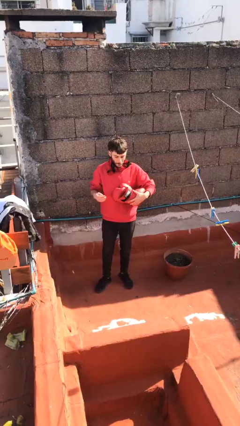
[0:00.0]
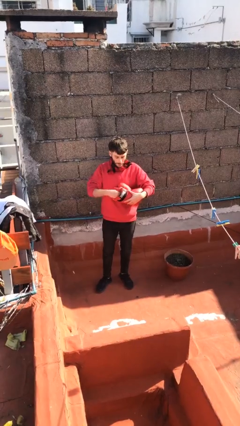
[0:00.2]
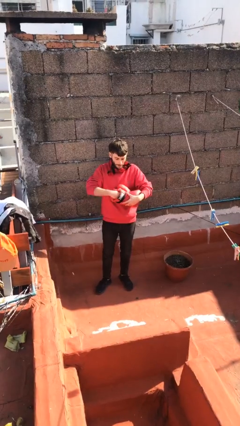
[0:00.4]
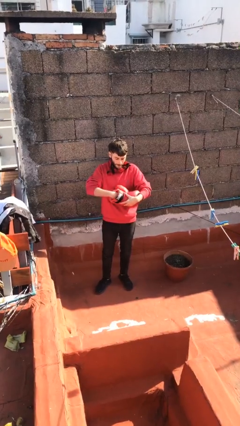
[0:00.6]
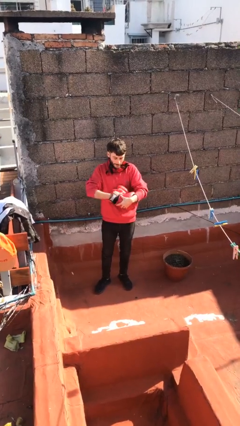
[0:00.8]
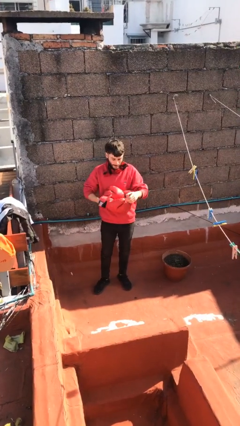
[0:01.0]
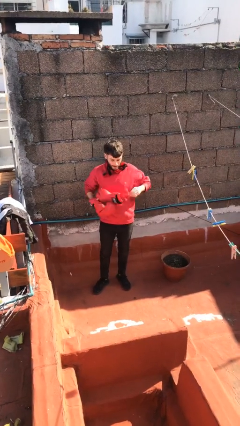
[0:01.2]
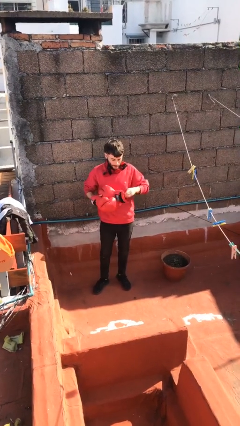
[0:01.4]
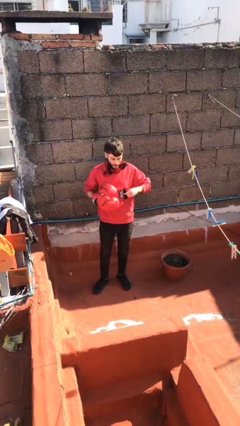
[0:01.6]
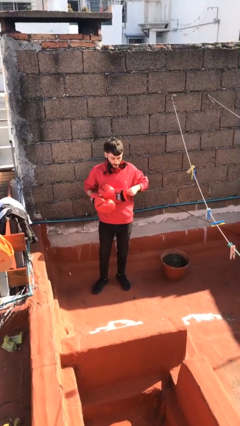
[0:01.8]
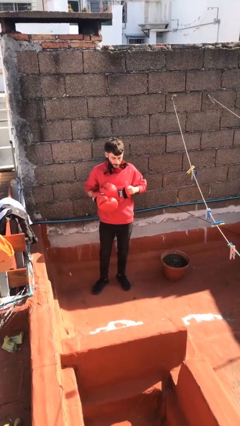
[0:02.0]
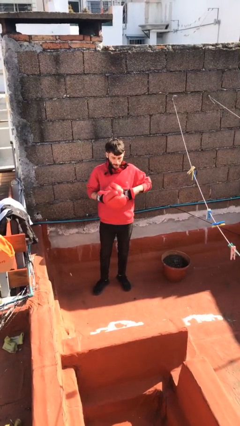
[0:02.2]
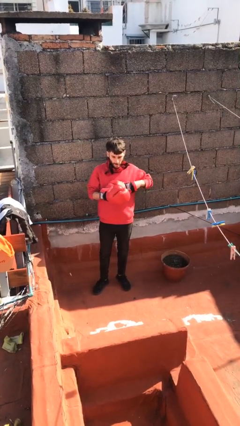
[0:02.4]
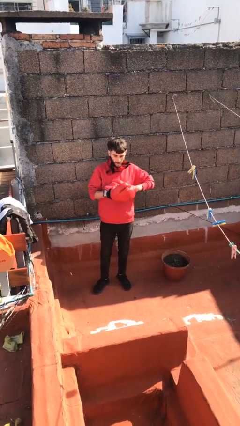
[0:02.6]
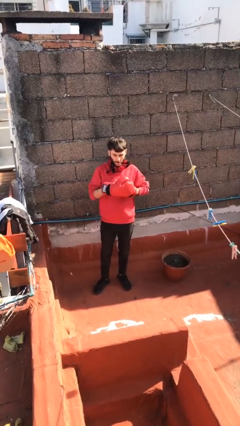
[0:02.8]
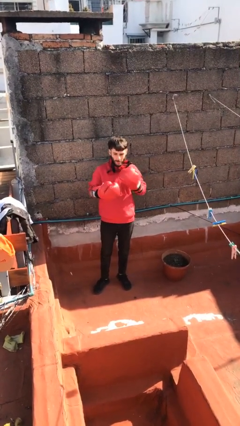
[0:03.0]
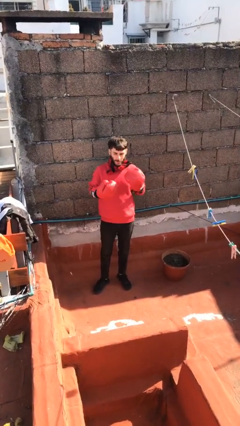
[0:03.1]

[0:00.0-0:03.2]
person puts on gloves

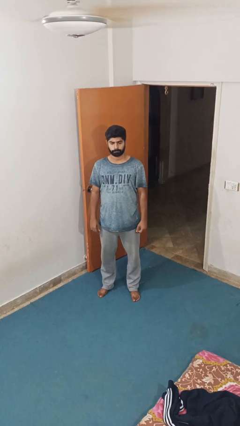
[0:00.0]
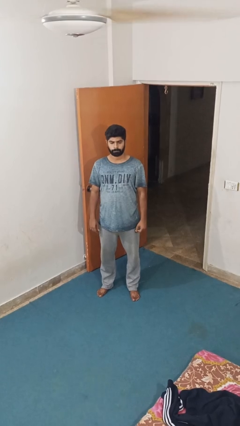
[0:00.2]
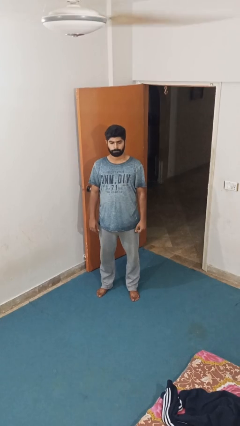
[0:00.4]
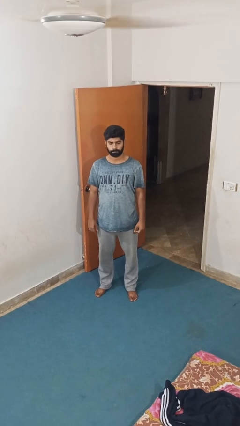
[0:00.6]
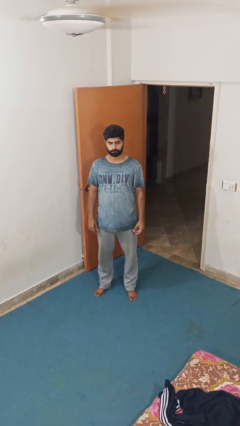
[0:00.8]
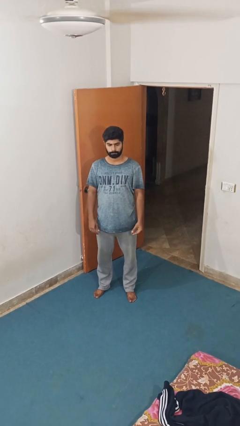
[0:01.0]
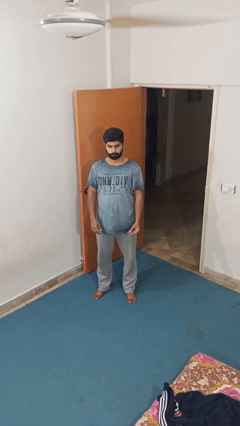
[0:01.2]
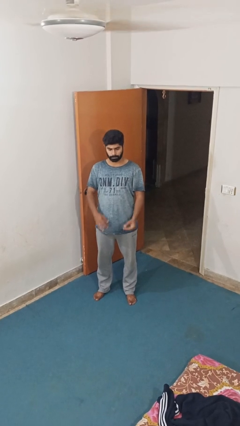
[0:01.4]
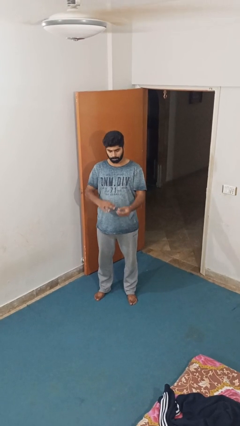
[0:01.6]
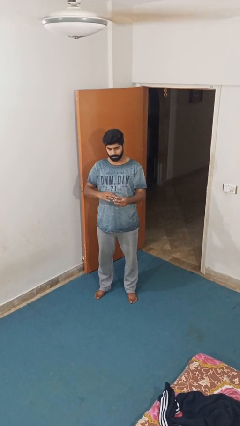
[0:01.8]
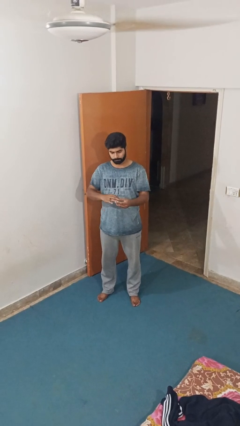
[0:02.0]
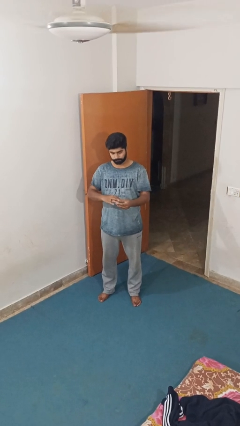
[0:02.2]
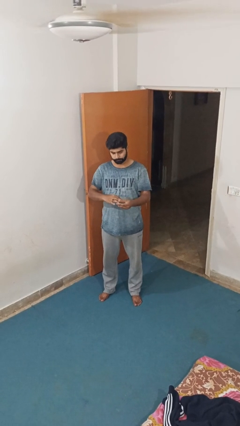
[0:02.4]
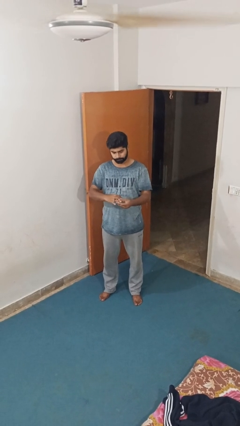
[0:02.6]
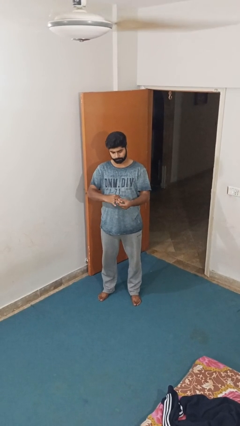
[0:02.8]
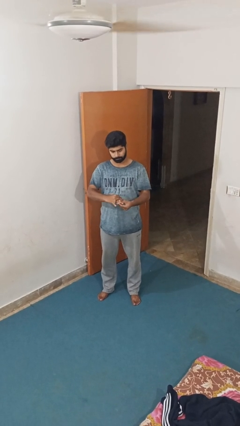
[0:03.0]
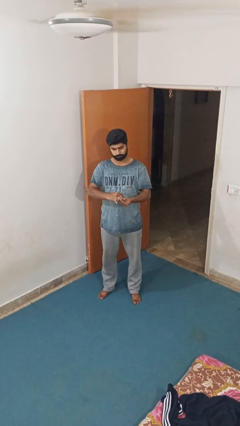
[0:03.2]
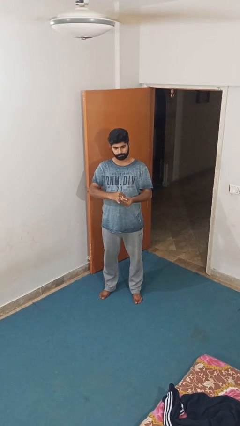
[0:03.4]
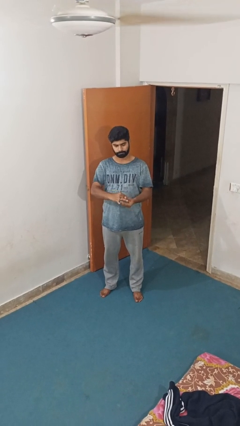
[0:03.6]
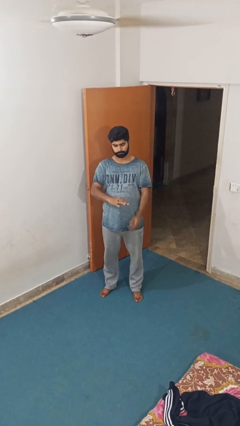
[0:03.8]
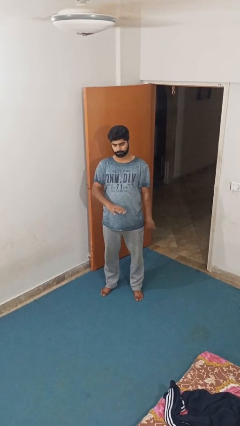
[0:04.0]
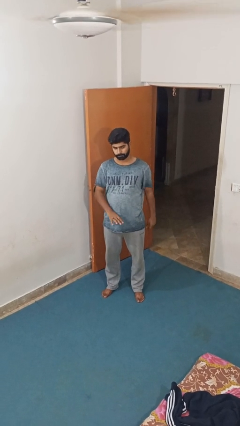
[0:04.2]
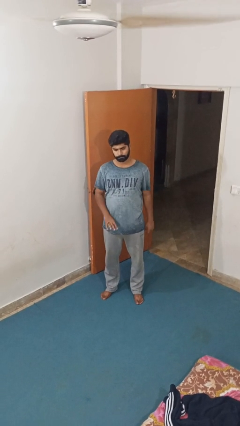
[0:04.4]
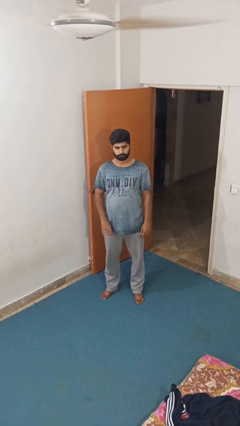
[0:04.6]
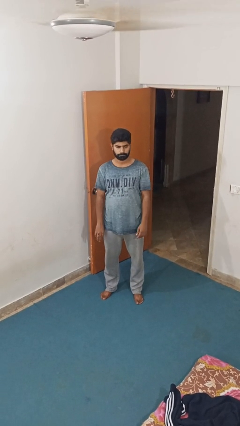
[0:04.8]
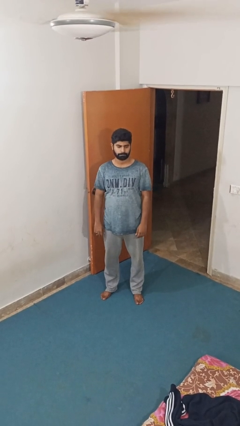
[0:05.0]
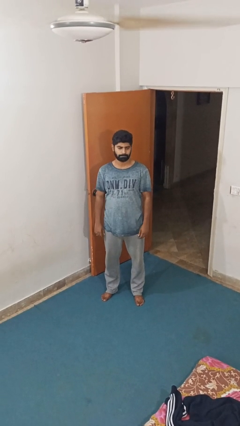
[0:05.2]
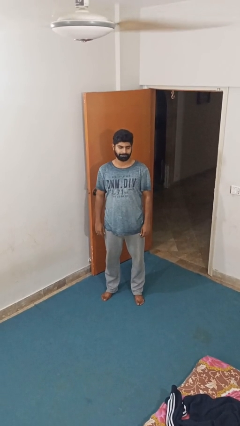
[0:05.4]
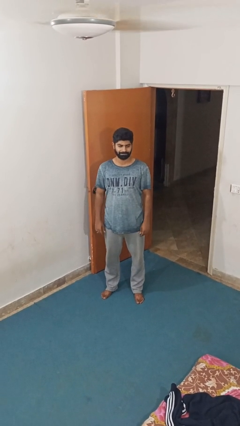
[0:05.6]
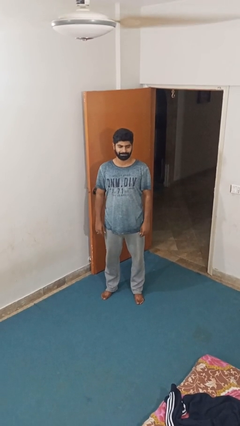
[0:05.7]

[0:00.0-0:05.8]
person puts on ring

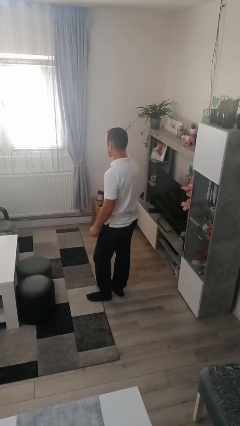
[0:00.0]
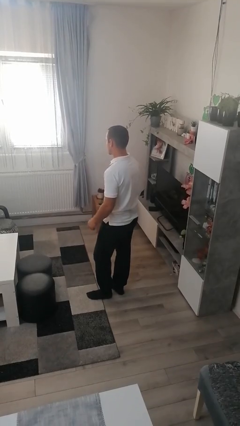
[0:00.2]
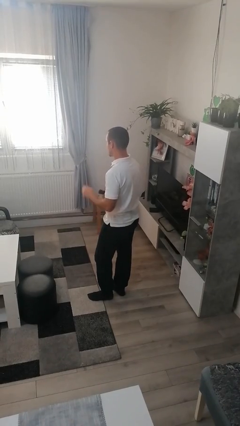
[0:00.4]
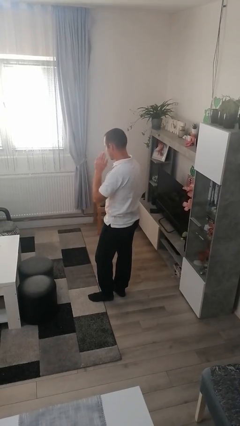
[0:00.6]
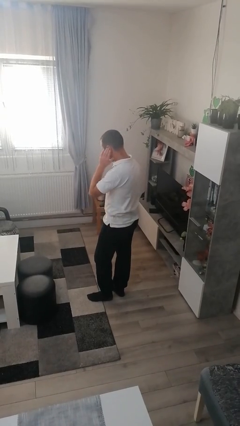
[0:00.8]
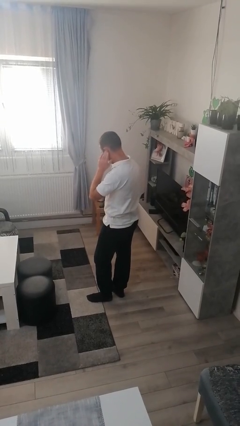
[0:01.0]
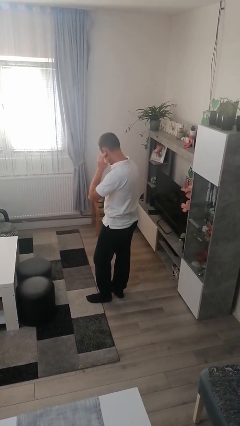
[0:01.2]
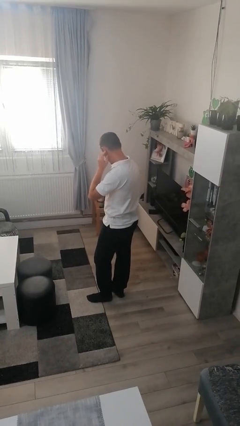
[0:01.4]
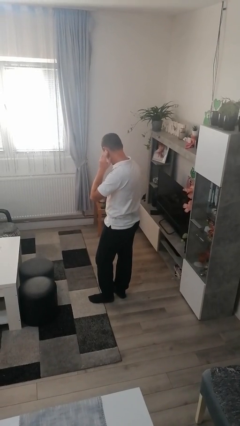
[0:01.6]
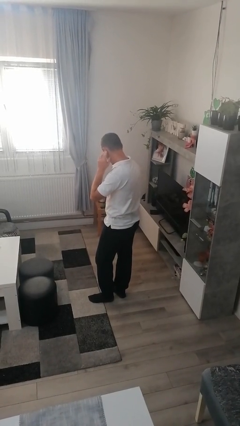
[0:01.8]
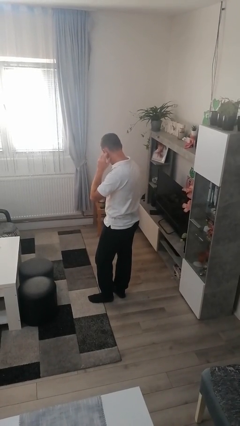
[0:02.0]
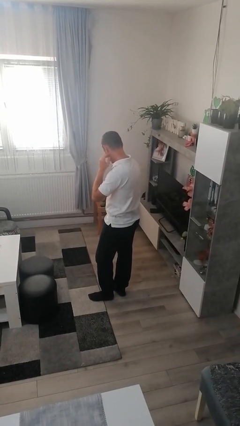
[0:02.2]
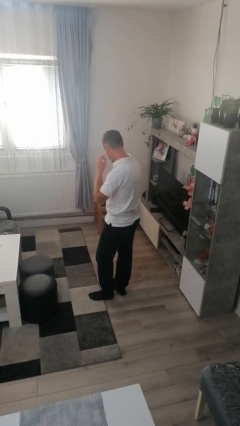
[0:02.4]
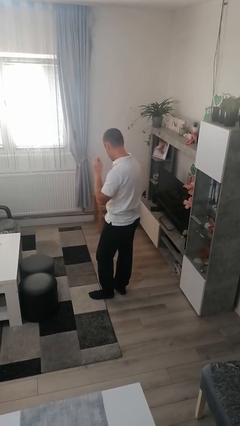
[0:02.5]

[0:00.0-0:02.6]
person touches earlobe

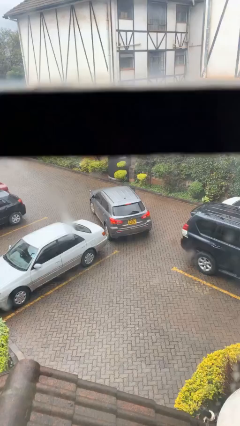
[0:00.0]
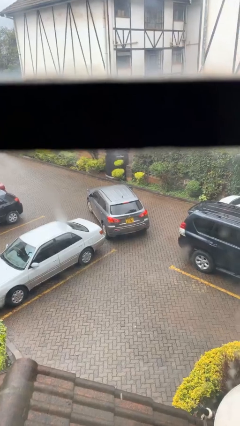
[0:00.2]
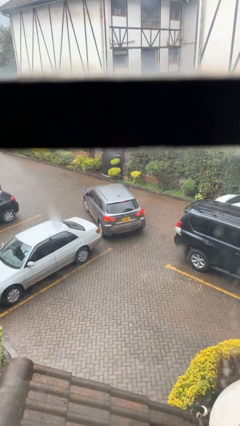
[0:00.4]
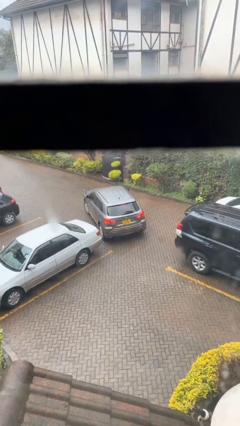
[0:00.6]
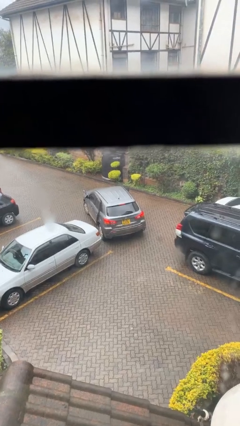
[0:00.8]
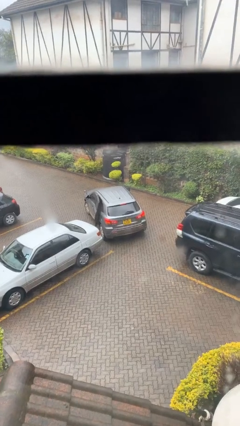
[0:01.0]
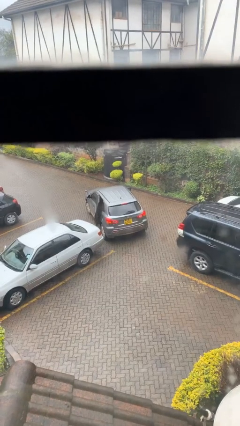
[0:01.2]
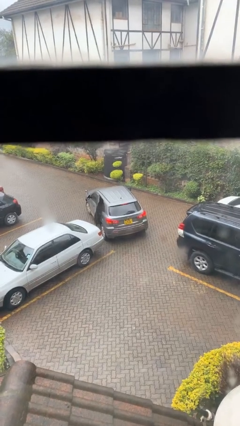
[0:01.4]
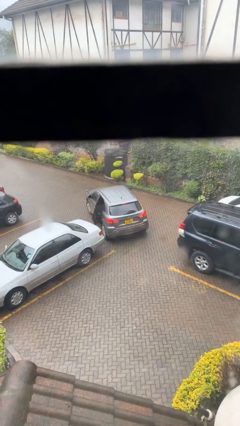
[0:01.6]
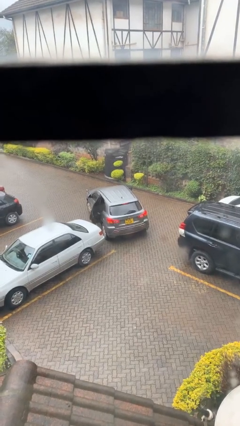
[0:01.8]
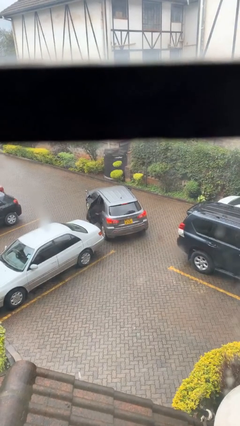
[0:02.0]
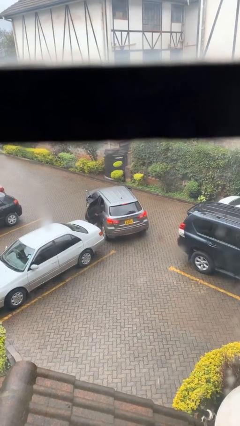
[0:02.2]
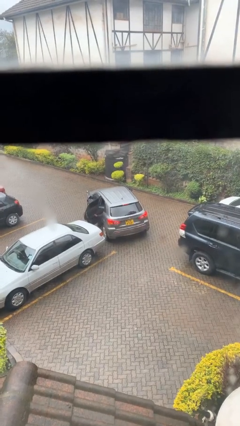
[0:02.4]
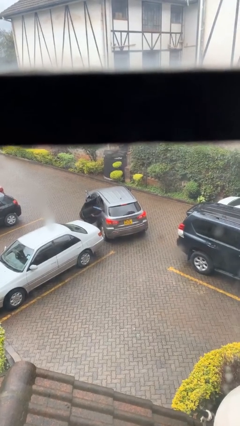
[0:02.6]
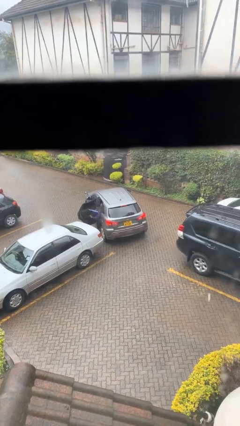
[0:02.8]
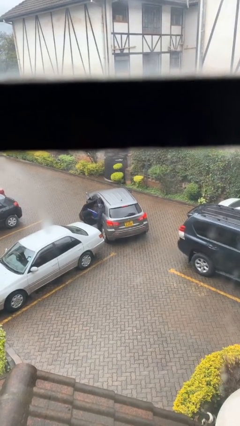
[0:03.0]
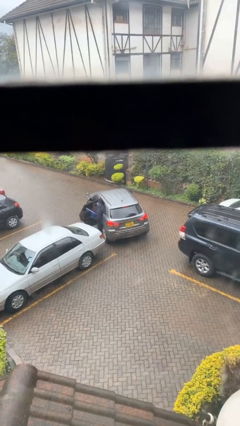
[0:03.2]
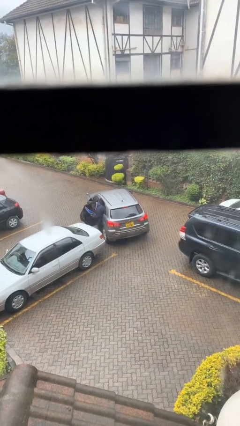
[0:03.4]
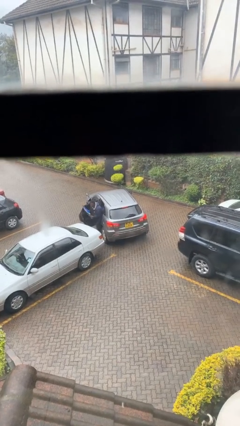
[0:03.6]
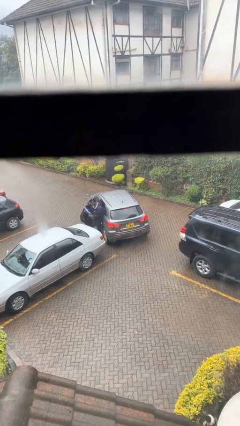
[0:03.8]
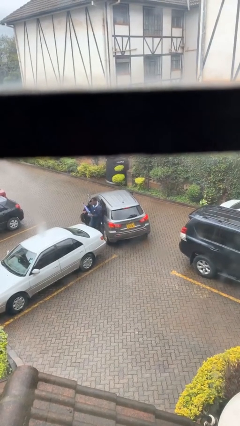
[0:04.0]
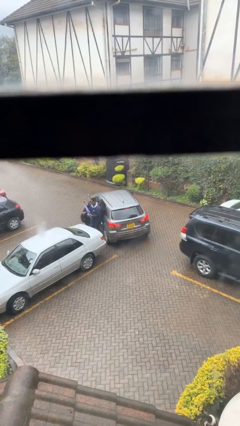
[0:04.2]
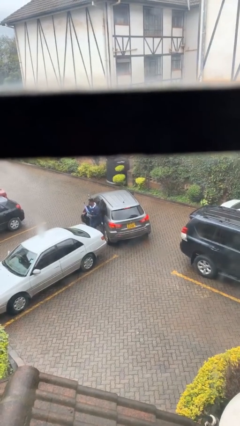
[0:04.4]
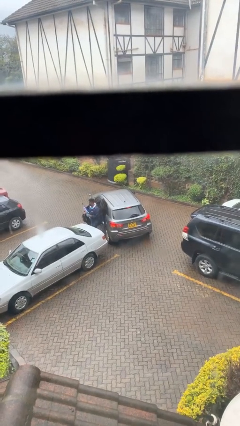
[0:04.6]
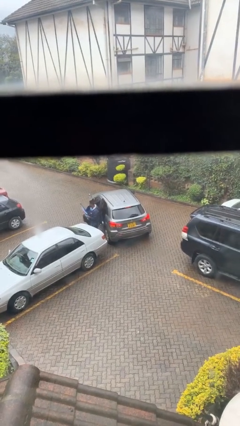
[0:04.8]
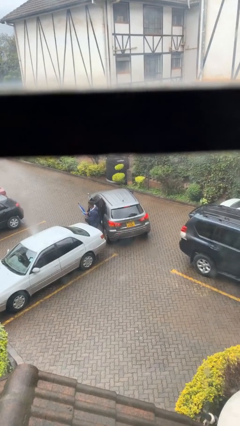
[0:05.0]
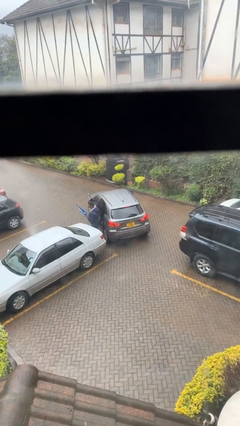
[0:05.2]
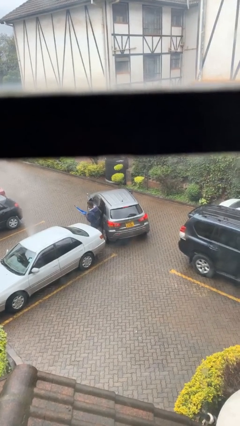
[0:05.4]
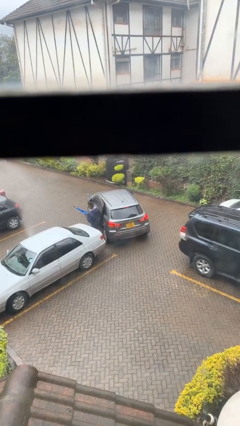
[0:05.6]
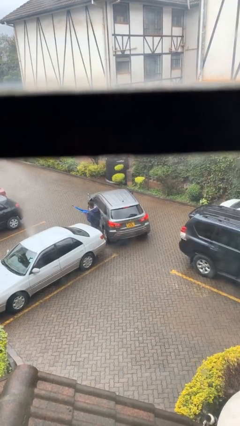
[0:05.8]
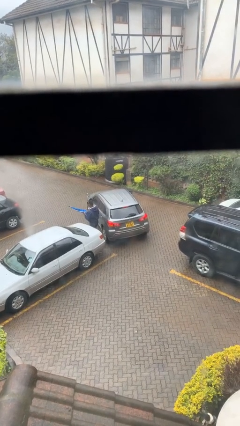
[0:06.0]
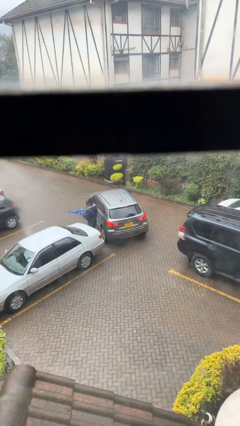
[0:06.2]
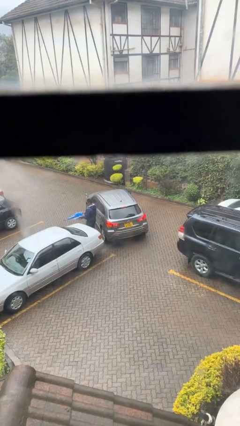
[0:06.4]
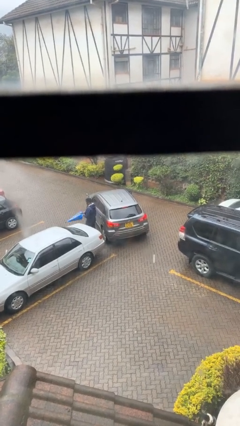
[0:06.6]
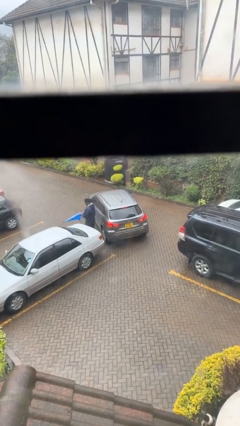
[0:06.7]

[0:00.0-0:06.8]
car drops off person
